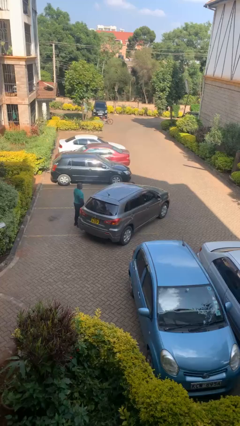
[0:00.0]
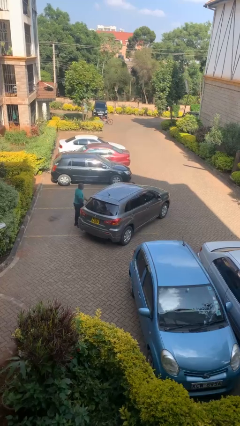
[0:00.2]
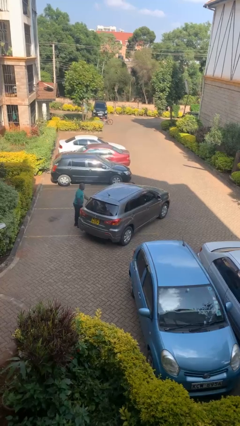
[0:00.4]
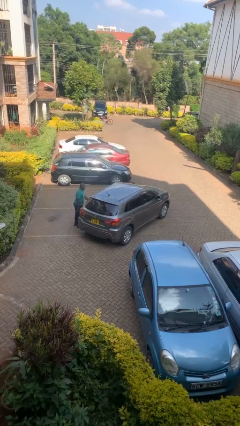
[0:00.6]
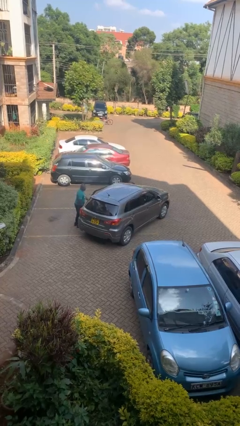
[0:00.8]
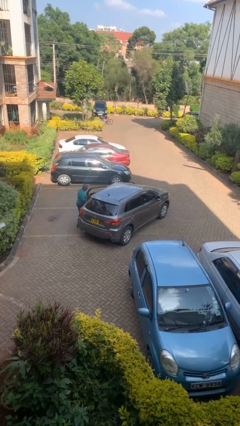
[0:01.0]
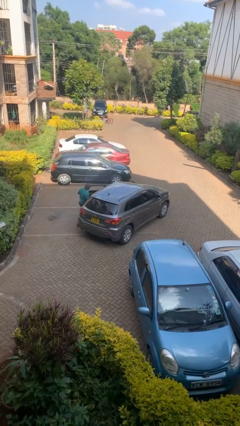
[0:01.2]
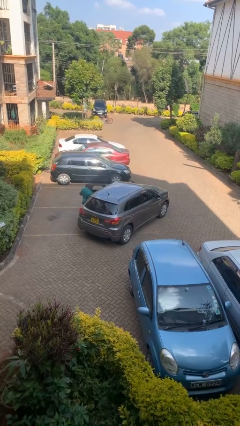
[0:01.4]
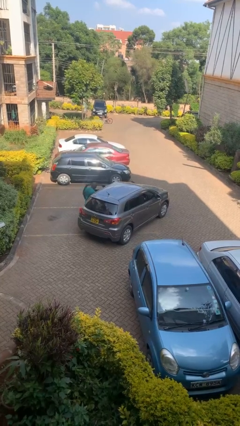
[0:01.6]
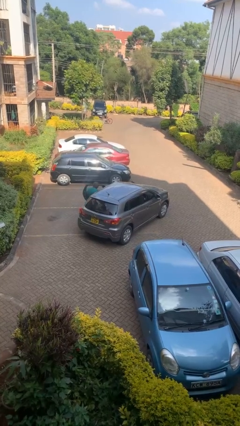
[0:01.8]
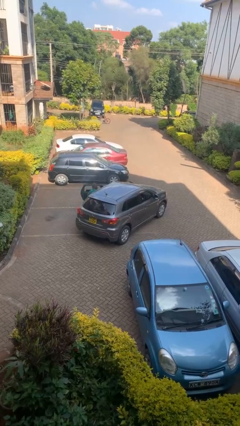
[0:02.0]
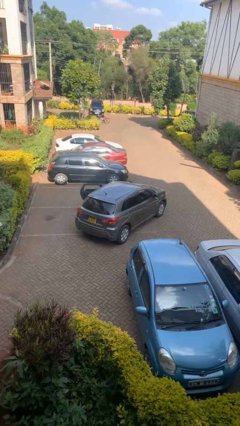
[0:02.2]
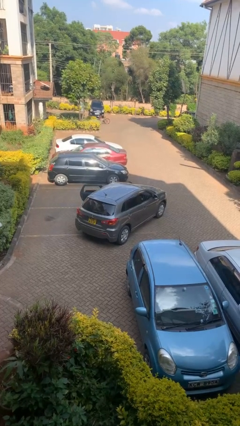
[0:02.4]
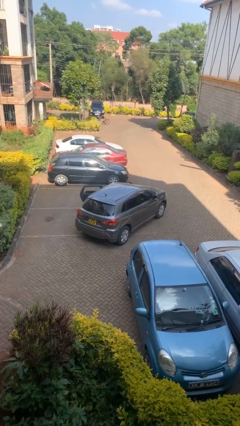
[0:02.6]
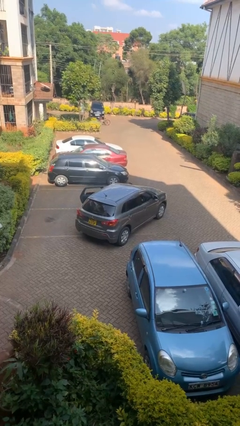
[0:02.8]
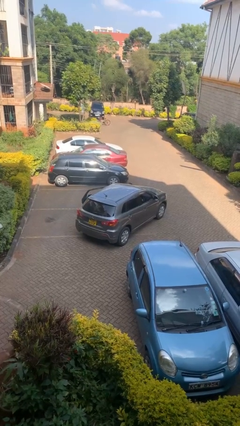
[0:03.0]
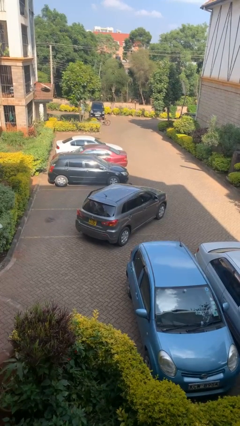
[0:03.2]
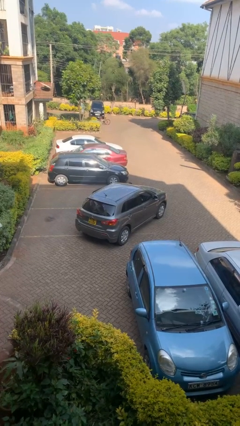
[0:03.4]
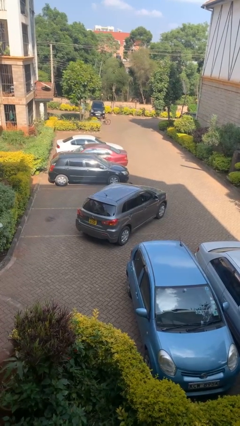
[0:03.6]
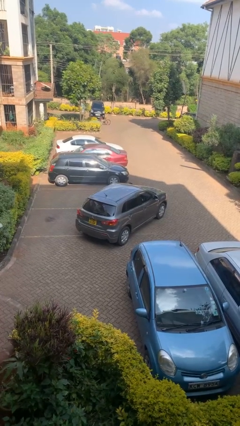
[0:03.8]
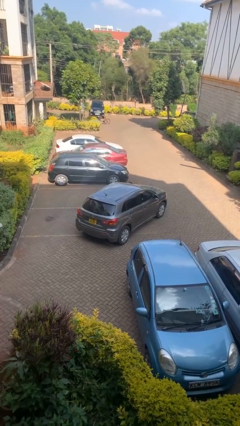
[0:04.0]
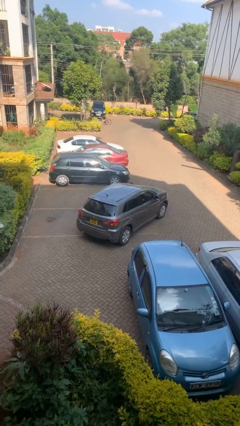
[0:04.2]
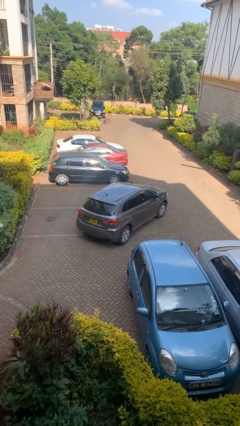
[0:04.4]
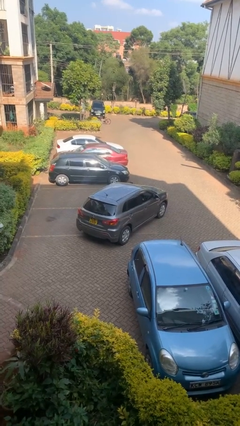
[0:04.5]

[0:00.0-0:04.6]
car picks up person

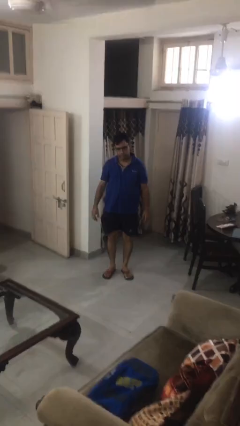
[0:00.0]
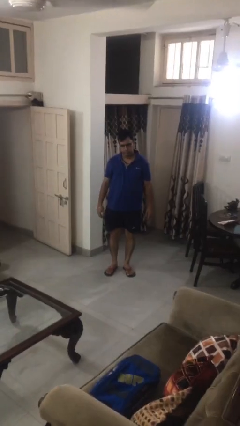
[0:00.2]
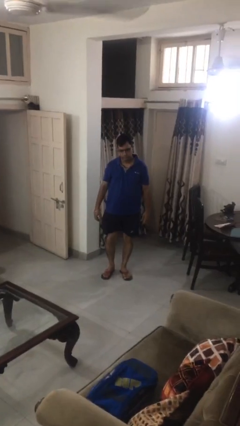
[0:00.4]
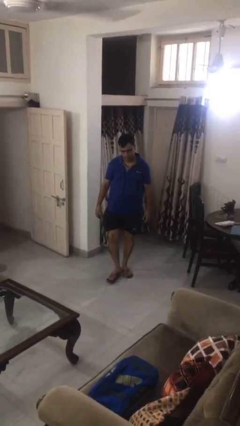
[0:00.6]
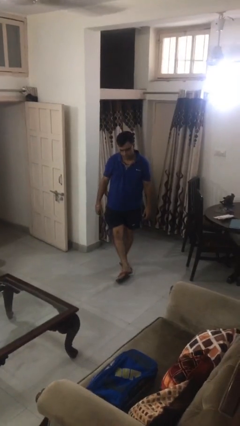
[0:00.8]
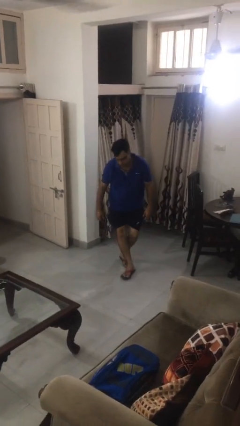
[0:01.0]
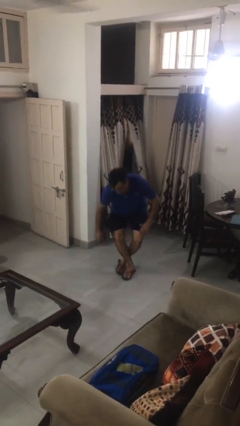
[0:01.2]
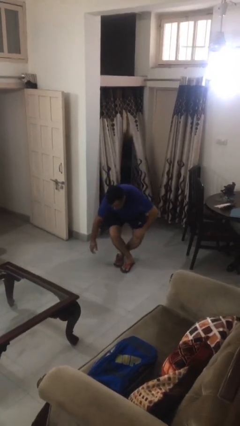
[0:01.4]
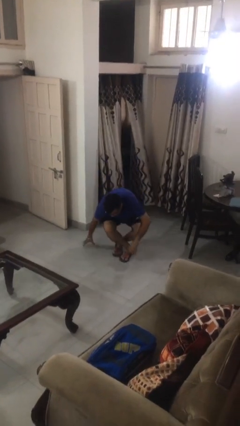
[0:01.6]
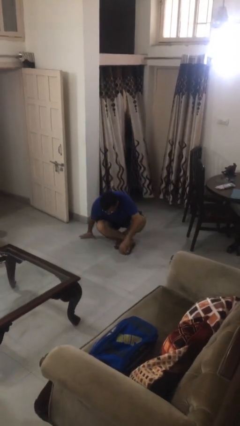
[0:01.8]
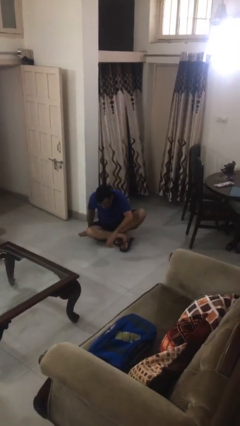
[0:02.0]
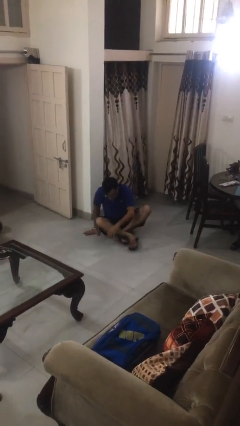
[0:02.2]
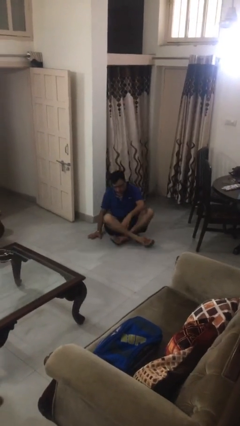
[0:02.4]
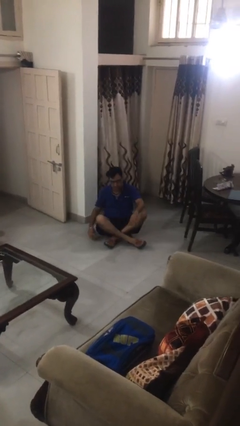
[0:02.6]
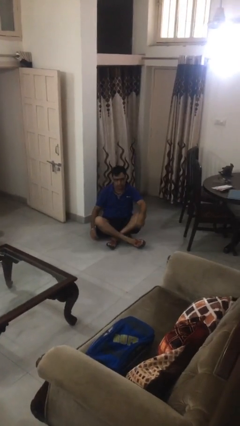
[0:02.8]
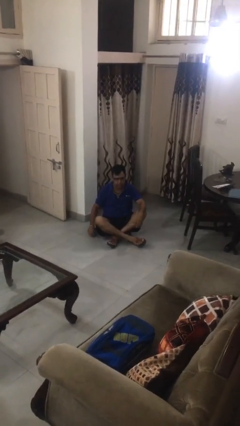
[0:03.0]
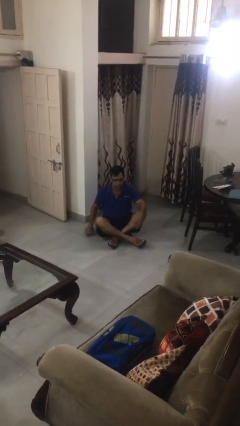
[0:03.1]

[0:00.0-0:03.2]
person sits crisscross

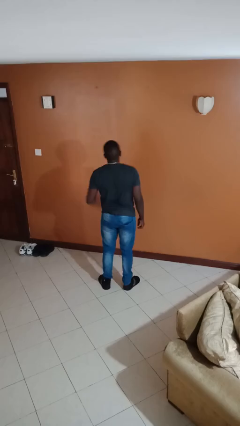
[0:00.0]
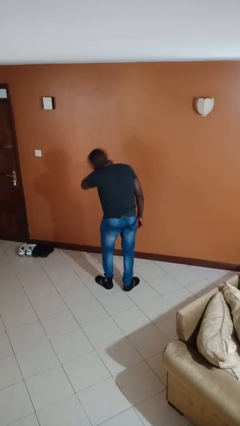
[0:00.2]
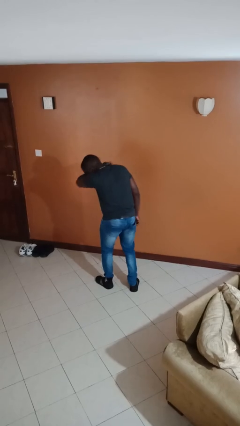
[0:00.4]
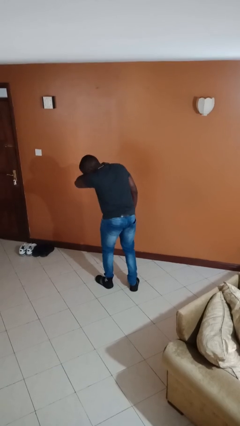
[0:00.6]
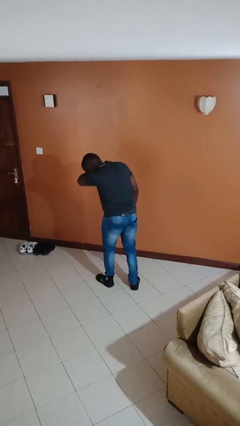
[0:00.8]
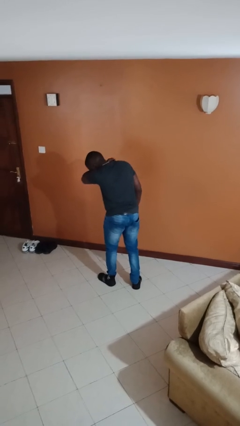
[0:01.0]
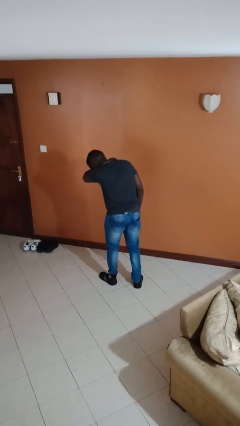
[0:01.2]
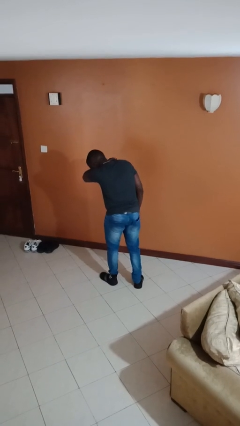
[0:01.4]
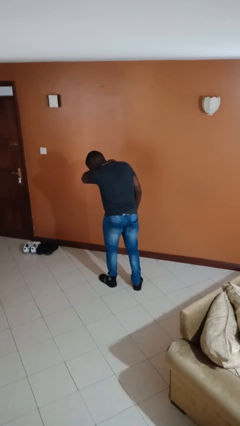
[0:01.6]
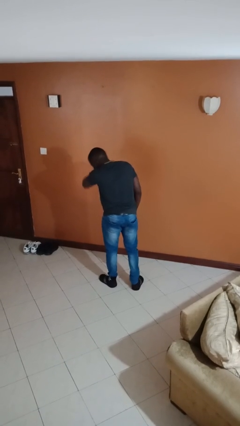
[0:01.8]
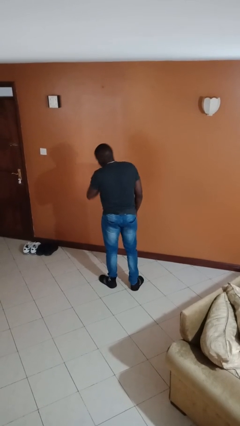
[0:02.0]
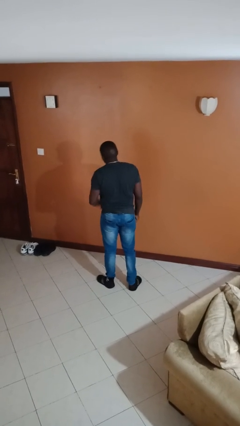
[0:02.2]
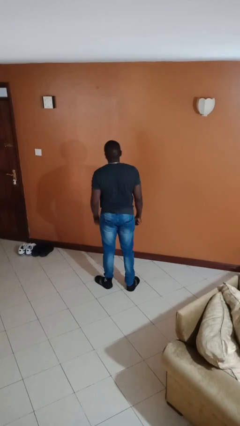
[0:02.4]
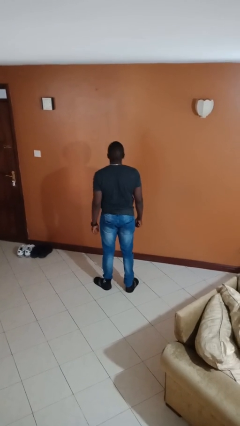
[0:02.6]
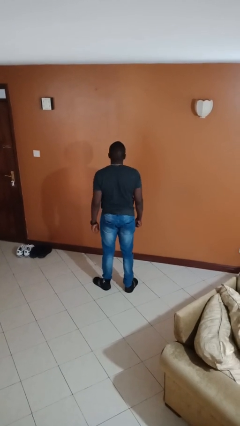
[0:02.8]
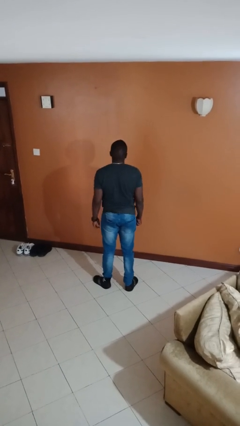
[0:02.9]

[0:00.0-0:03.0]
person sneezes into arm

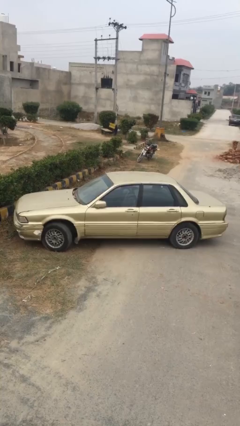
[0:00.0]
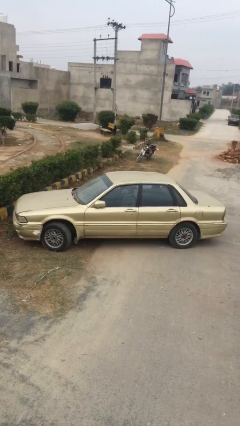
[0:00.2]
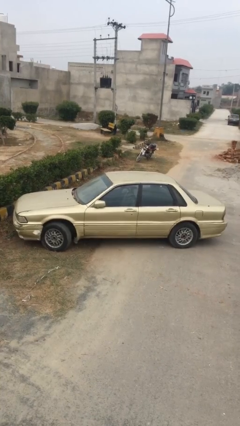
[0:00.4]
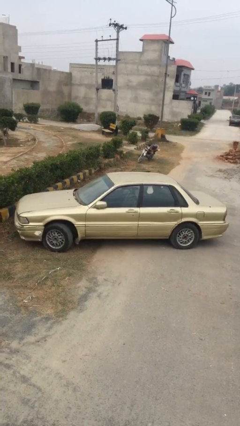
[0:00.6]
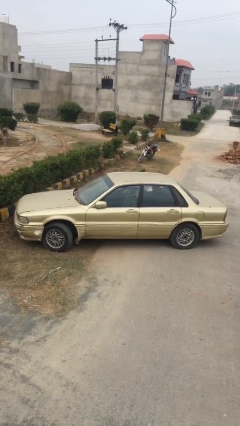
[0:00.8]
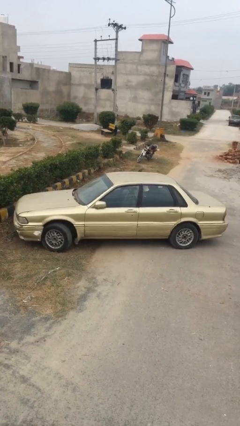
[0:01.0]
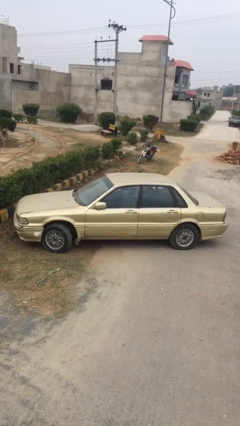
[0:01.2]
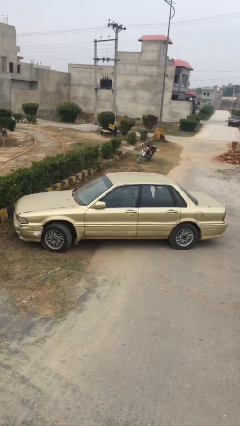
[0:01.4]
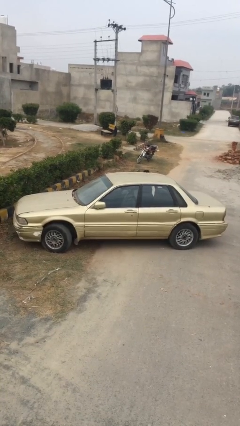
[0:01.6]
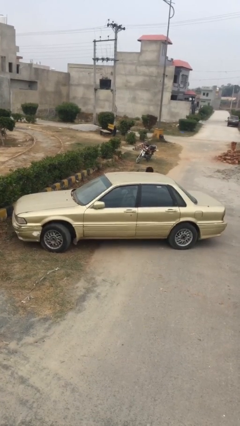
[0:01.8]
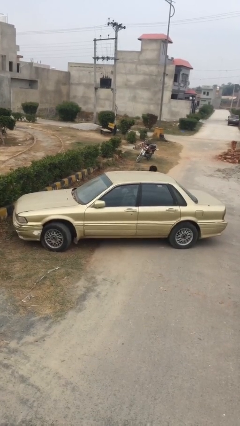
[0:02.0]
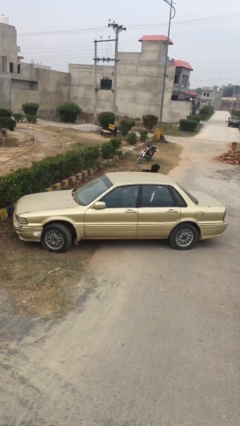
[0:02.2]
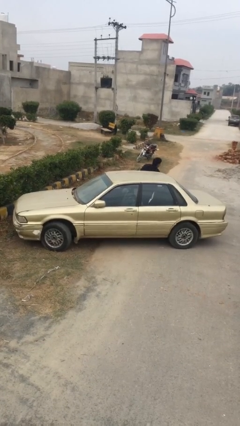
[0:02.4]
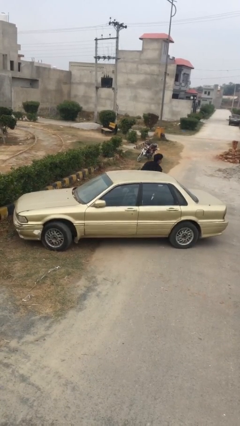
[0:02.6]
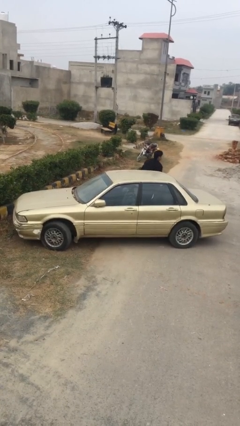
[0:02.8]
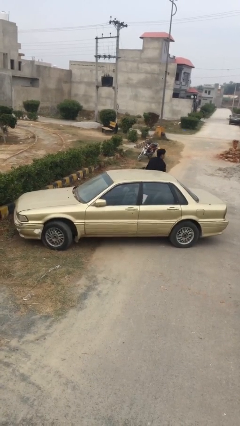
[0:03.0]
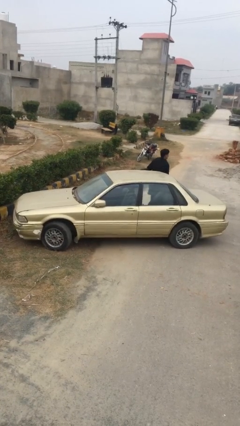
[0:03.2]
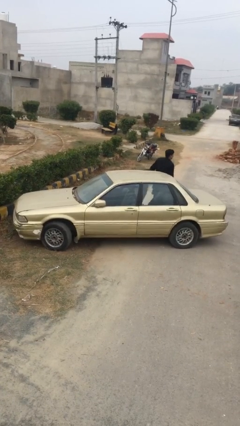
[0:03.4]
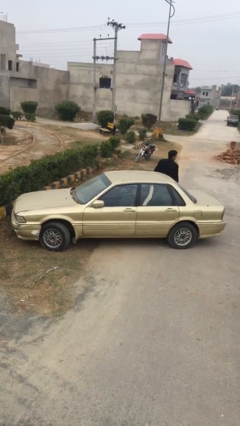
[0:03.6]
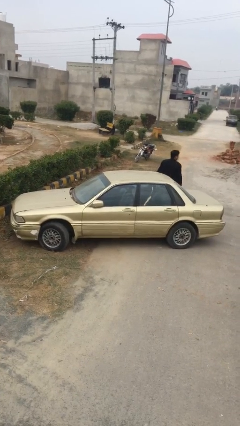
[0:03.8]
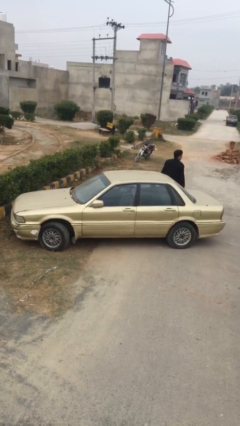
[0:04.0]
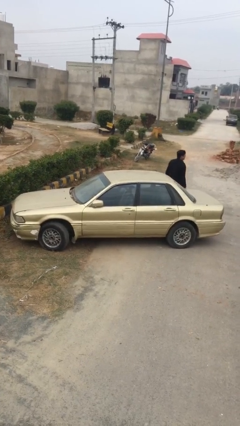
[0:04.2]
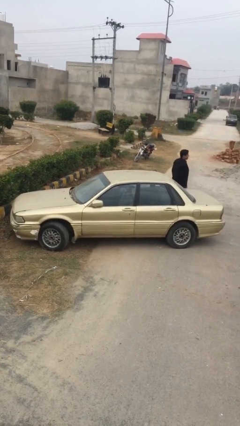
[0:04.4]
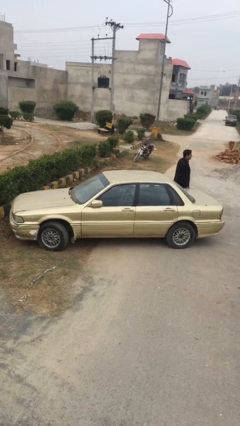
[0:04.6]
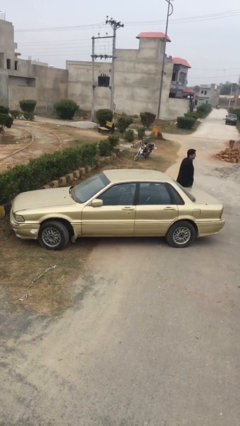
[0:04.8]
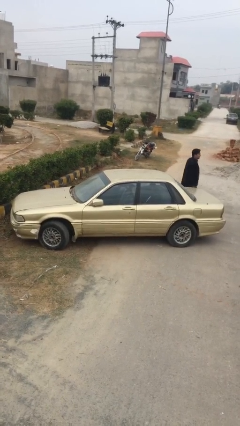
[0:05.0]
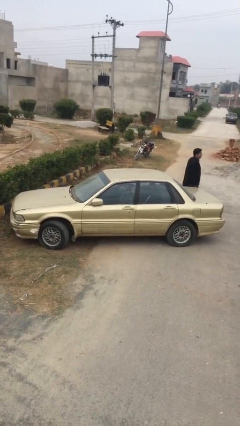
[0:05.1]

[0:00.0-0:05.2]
car drops off person

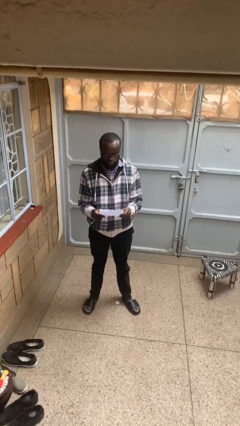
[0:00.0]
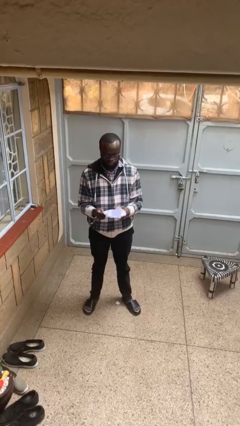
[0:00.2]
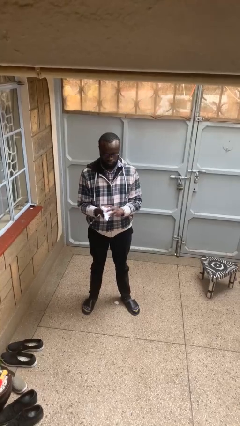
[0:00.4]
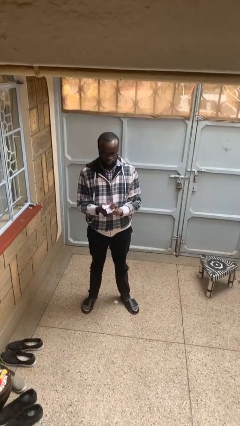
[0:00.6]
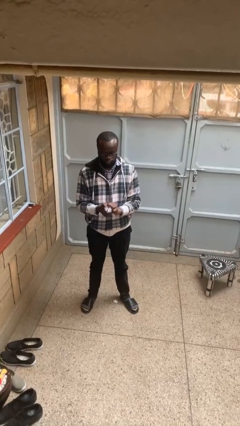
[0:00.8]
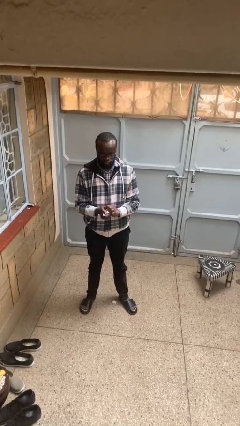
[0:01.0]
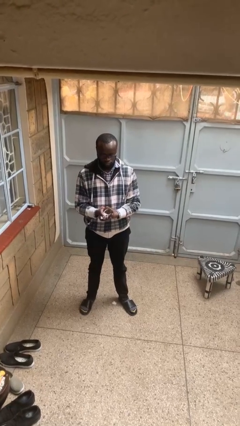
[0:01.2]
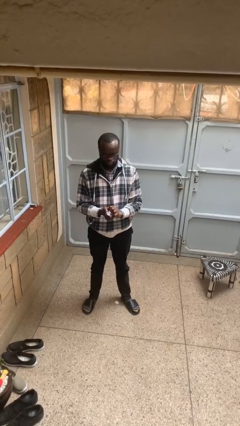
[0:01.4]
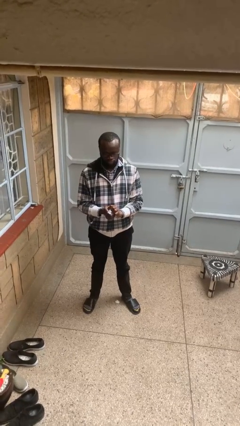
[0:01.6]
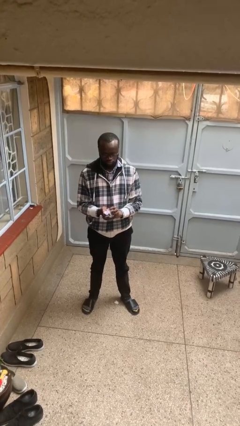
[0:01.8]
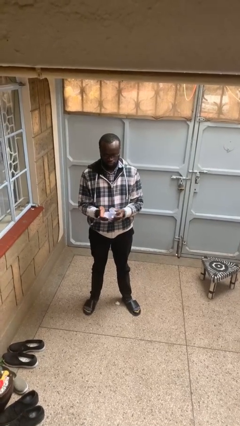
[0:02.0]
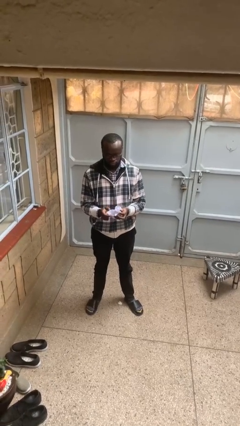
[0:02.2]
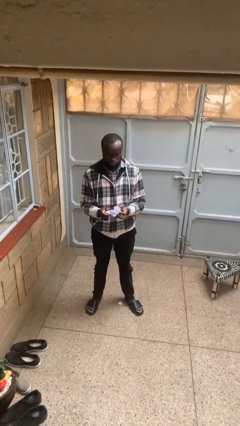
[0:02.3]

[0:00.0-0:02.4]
person crumples paper
